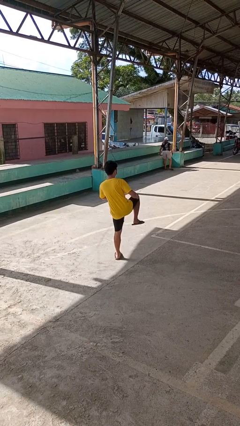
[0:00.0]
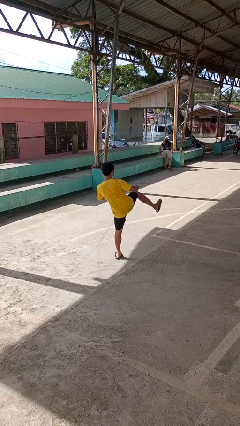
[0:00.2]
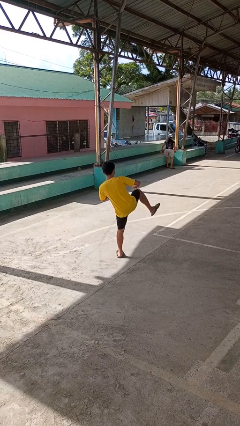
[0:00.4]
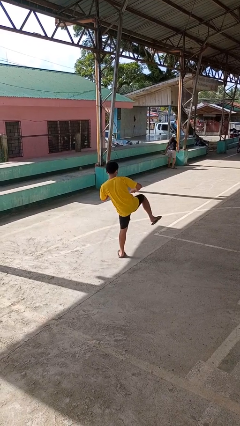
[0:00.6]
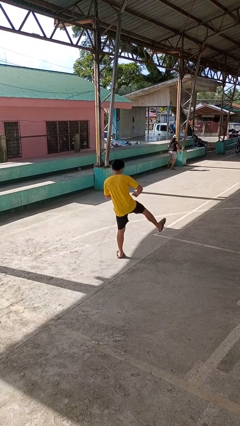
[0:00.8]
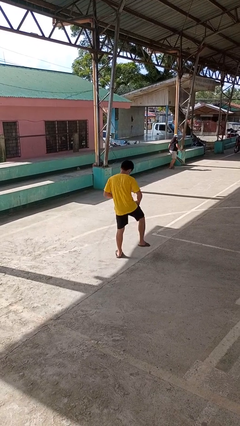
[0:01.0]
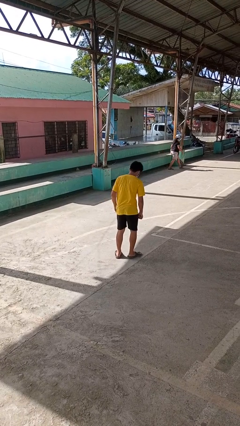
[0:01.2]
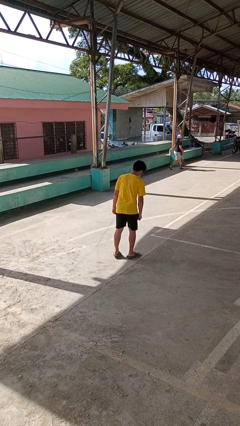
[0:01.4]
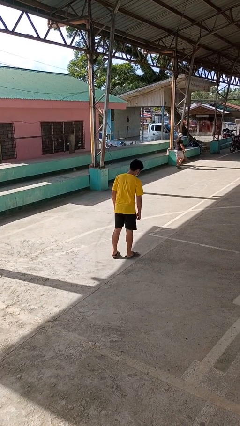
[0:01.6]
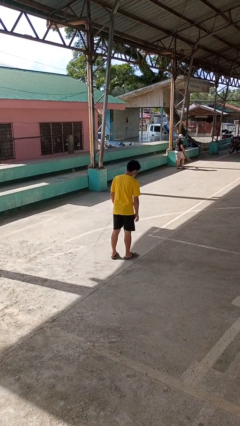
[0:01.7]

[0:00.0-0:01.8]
person karate kicks

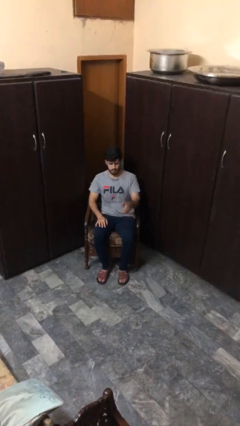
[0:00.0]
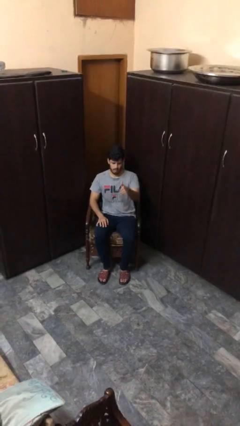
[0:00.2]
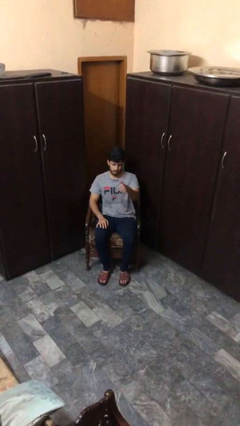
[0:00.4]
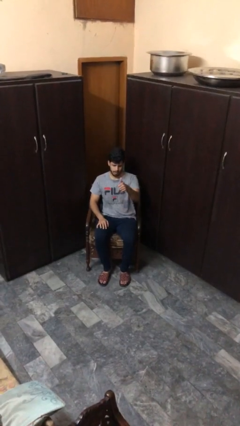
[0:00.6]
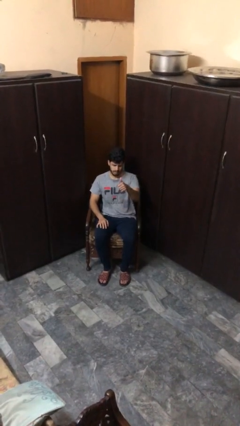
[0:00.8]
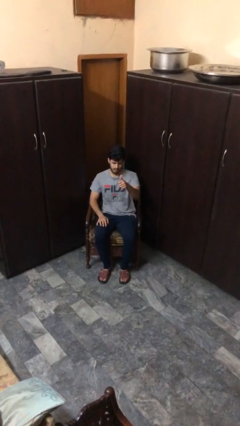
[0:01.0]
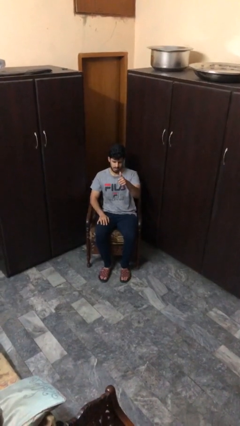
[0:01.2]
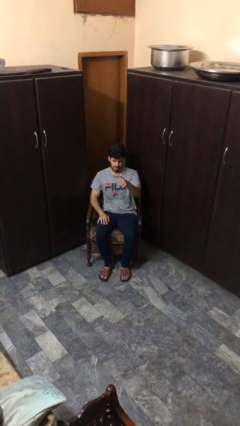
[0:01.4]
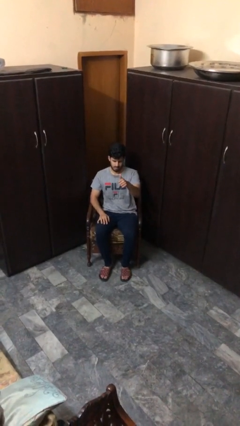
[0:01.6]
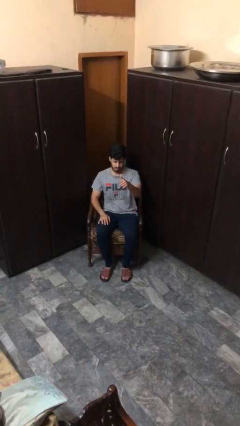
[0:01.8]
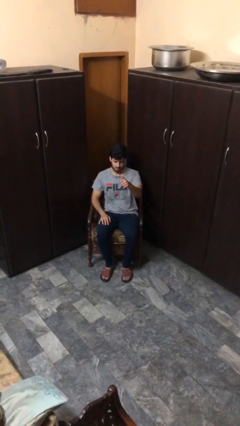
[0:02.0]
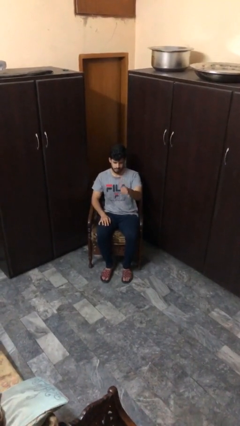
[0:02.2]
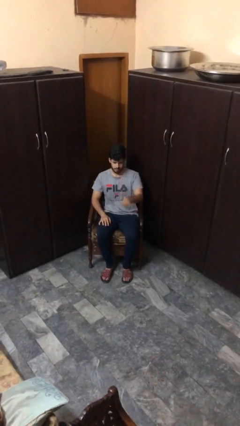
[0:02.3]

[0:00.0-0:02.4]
person gestures thumbs up

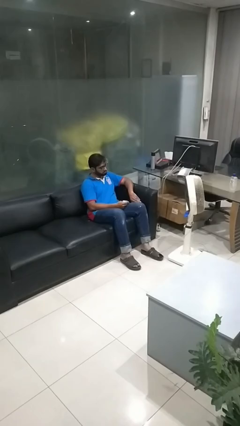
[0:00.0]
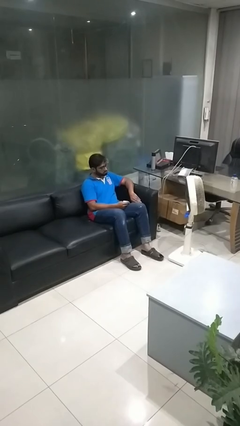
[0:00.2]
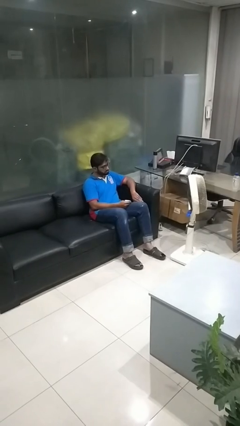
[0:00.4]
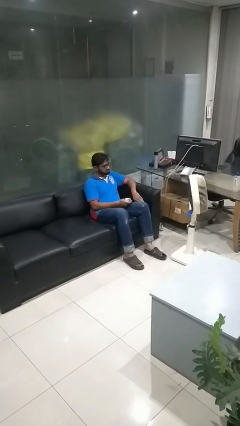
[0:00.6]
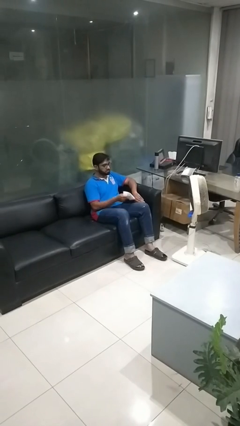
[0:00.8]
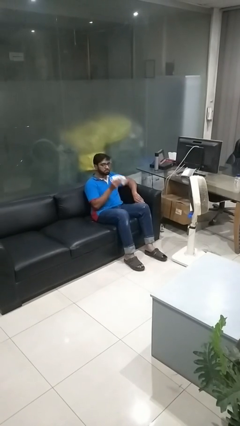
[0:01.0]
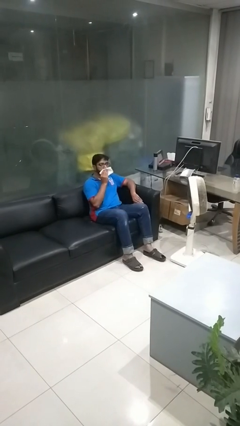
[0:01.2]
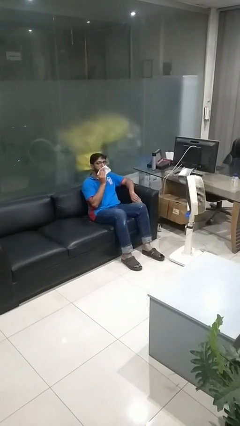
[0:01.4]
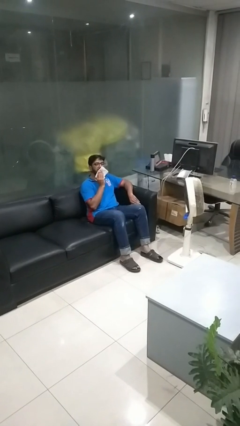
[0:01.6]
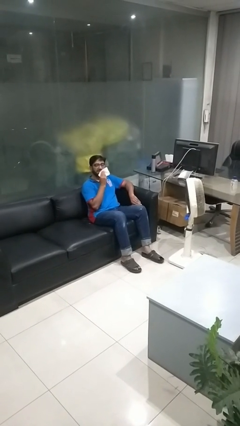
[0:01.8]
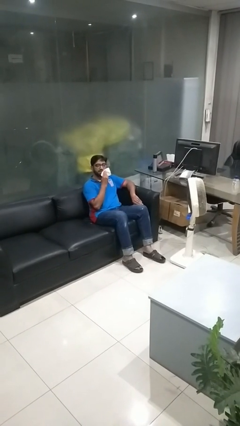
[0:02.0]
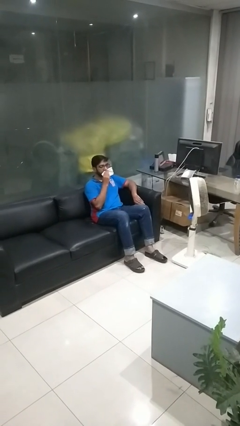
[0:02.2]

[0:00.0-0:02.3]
person wipes mouth with napkin

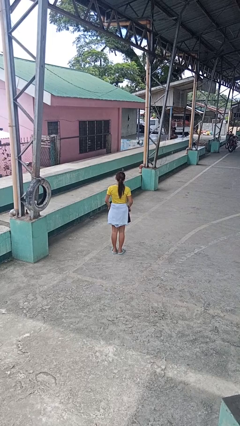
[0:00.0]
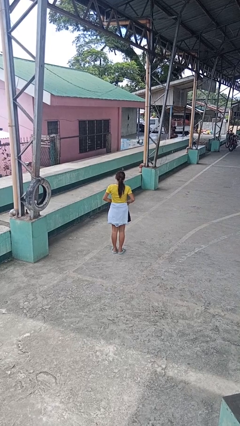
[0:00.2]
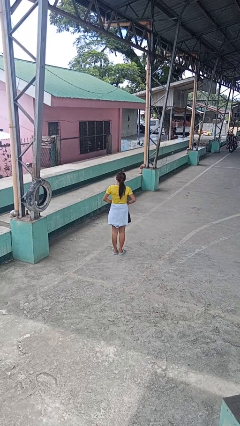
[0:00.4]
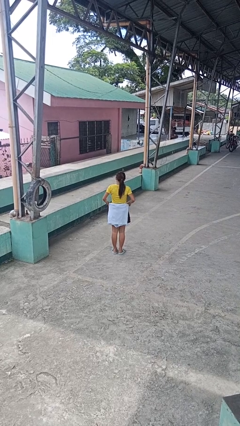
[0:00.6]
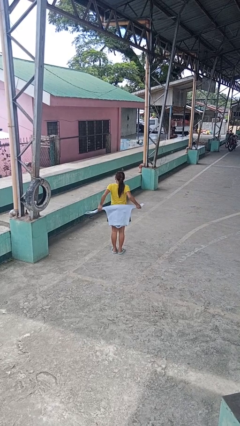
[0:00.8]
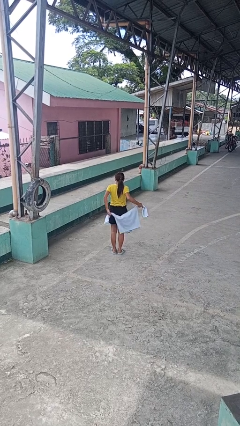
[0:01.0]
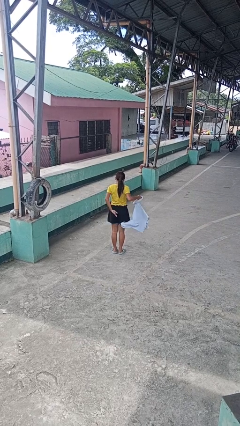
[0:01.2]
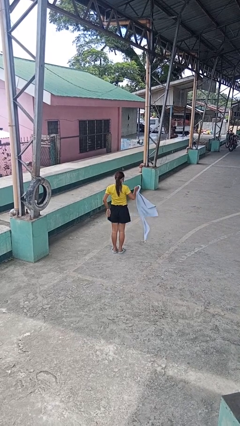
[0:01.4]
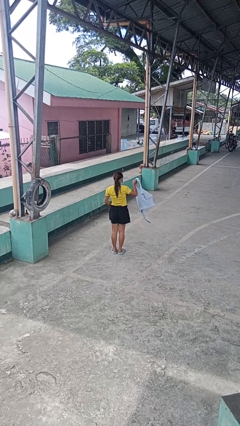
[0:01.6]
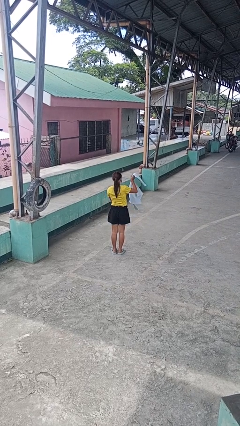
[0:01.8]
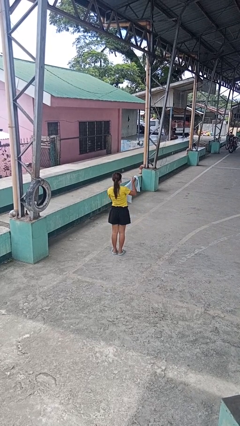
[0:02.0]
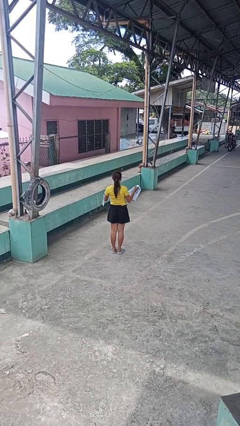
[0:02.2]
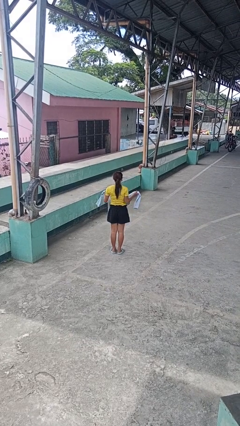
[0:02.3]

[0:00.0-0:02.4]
person unties jacket around waist

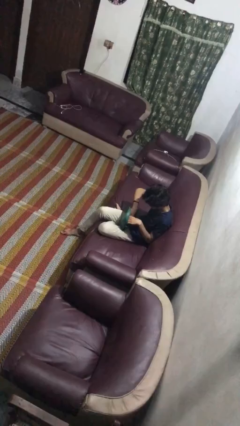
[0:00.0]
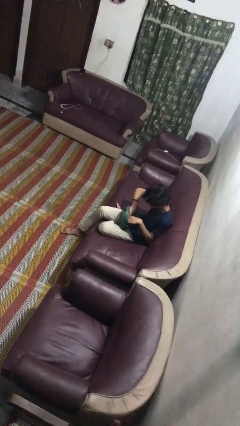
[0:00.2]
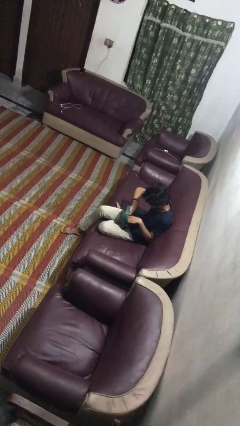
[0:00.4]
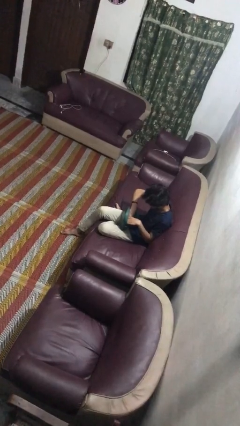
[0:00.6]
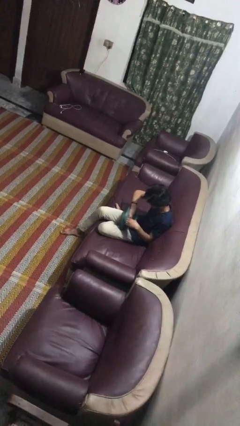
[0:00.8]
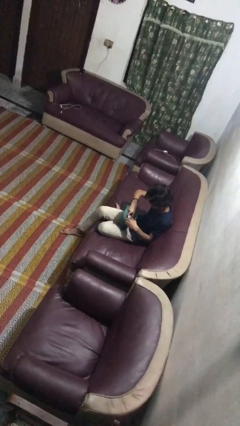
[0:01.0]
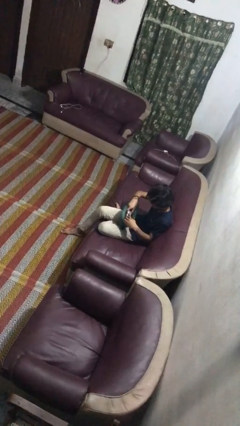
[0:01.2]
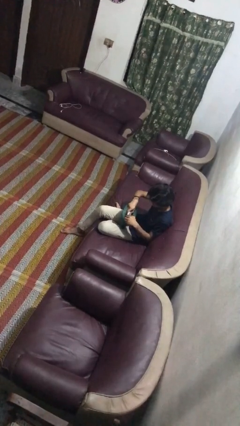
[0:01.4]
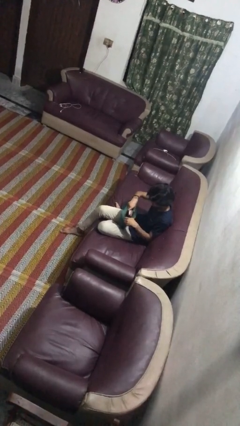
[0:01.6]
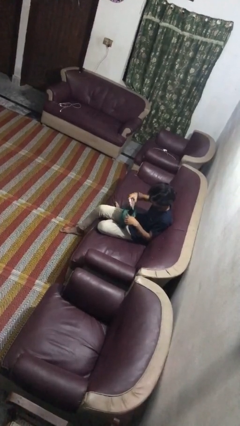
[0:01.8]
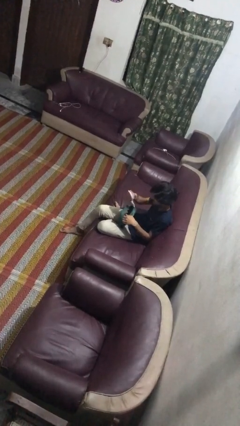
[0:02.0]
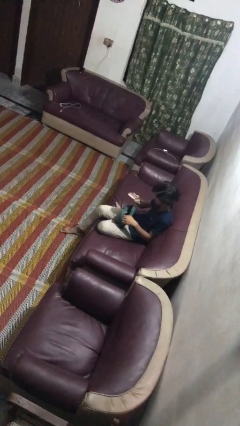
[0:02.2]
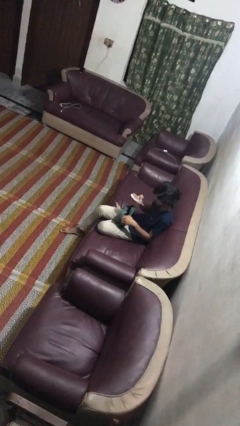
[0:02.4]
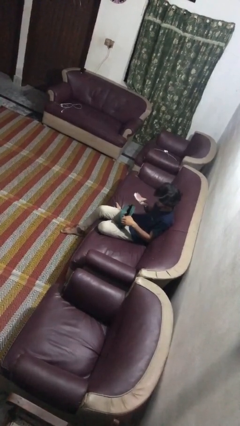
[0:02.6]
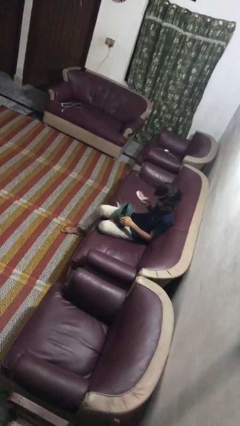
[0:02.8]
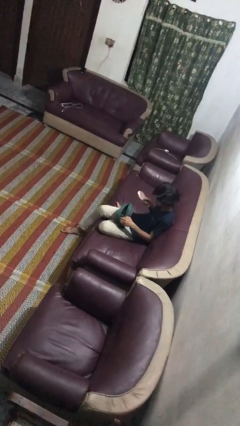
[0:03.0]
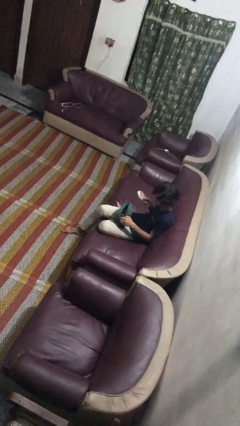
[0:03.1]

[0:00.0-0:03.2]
person takes object from purse

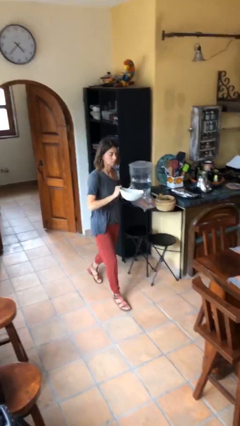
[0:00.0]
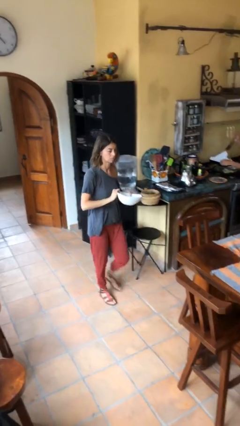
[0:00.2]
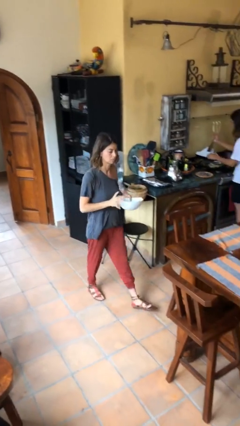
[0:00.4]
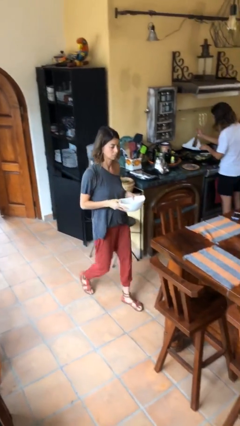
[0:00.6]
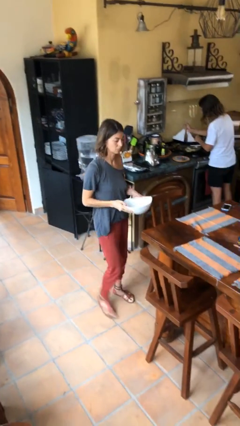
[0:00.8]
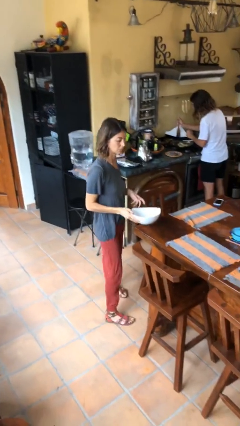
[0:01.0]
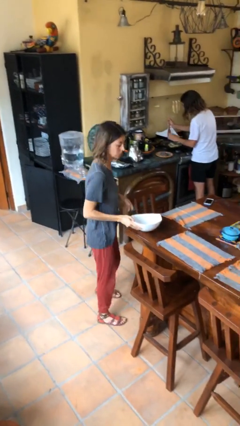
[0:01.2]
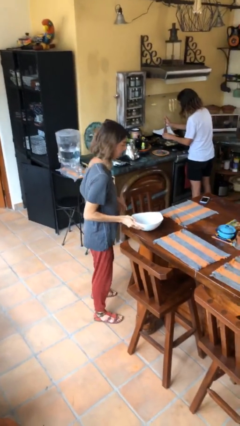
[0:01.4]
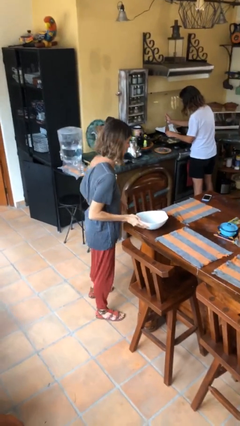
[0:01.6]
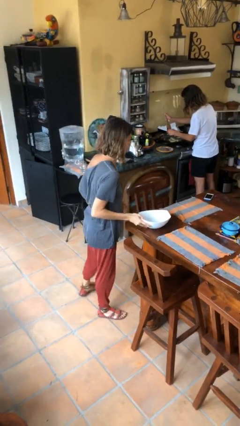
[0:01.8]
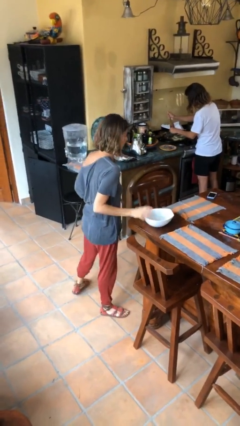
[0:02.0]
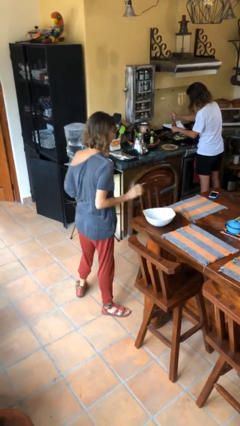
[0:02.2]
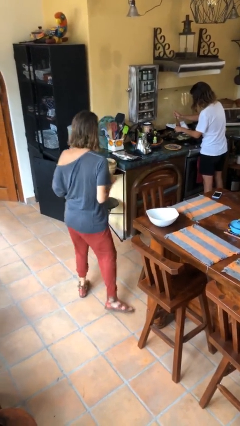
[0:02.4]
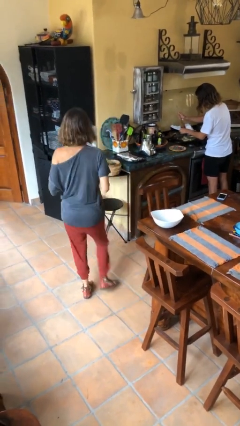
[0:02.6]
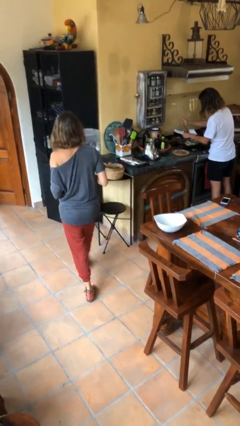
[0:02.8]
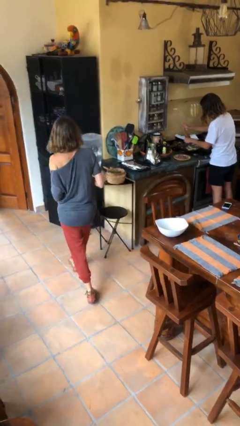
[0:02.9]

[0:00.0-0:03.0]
person puts down object on table

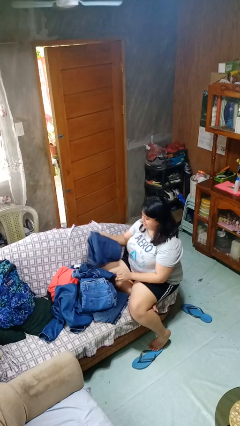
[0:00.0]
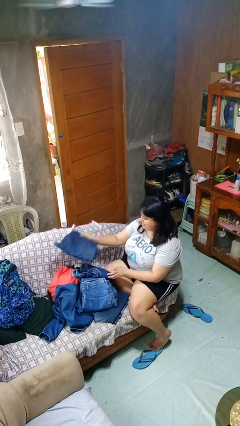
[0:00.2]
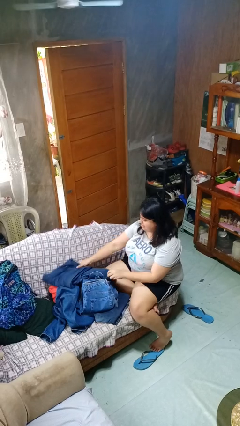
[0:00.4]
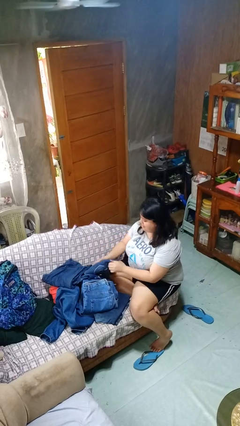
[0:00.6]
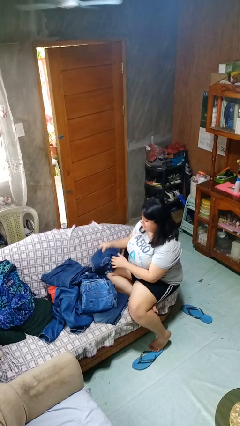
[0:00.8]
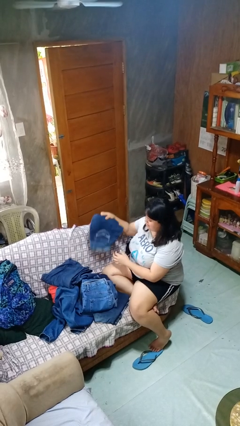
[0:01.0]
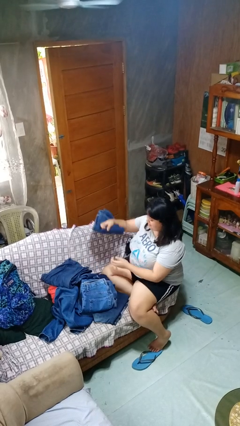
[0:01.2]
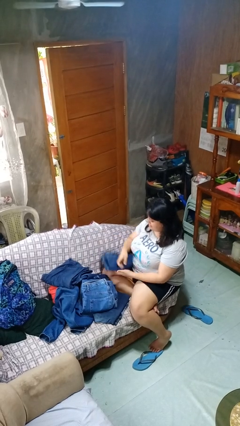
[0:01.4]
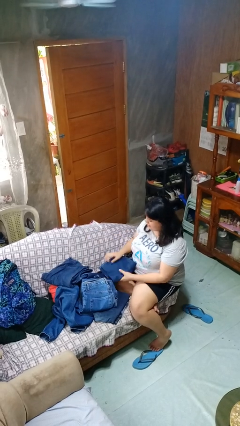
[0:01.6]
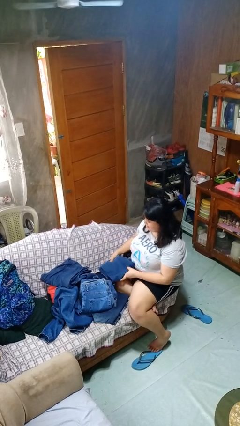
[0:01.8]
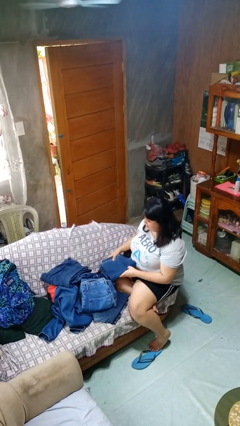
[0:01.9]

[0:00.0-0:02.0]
person folds pants
